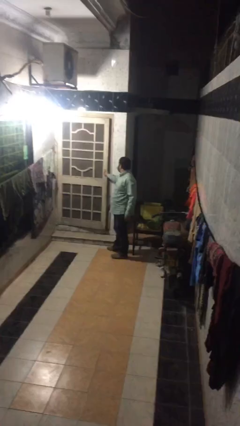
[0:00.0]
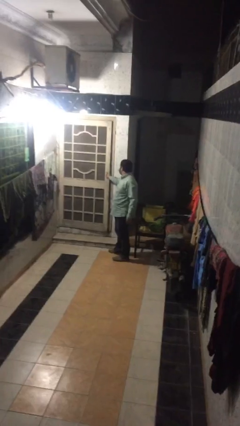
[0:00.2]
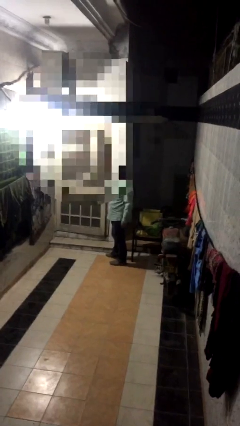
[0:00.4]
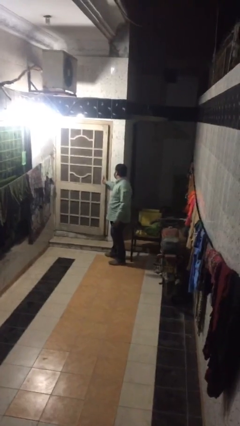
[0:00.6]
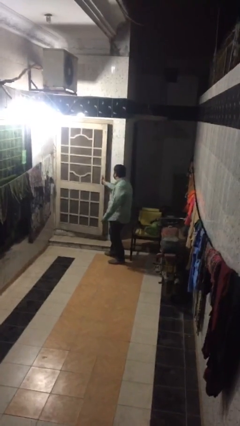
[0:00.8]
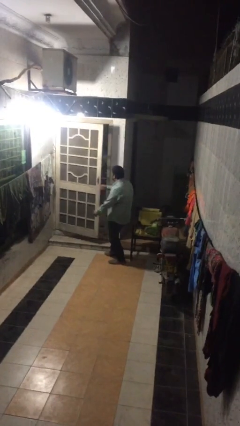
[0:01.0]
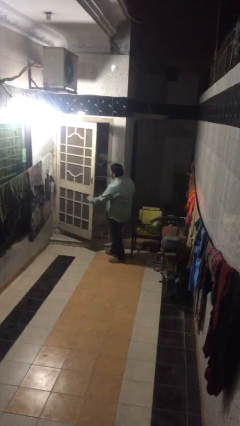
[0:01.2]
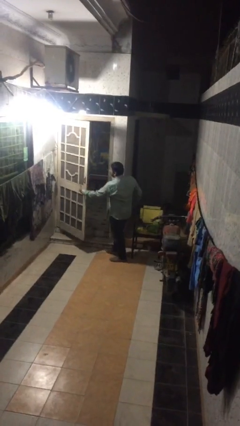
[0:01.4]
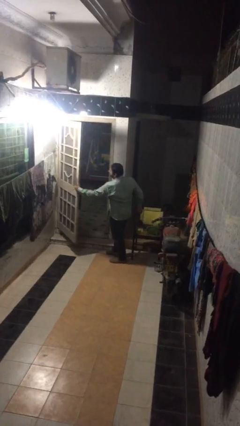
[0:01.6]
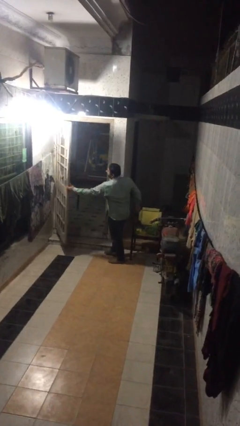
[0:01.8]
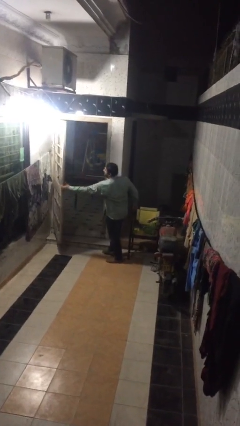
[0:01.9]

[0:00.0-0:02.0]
person opens facility door

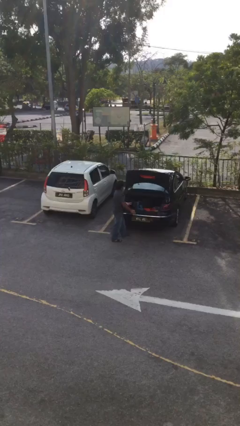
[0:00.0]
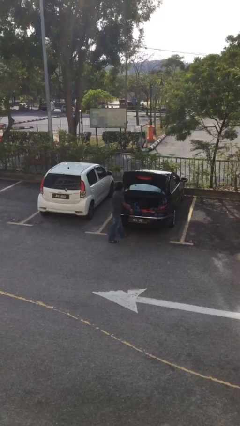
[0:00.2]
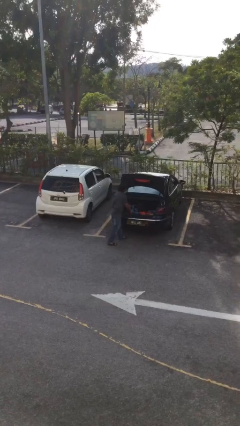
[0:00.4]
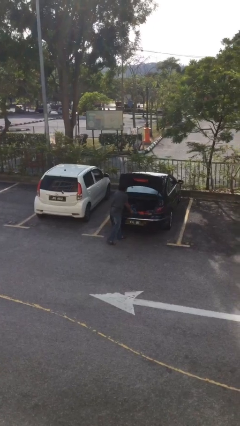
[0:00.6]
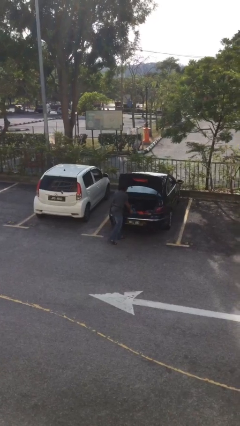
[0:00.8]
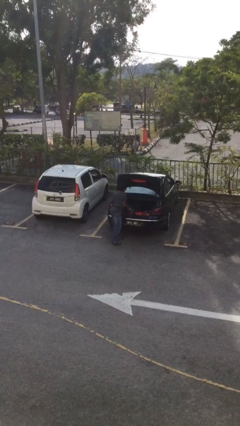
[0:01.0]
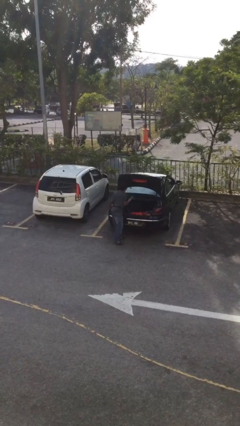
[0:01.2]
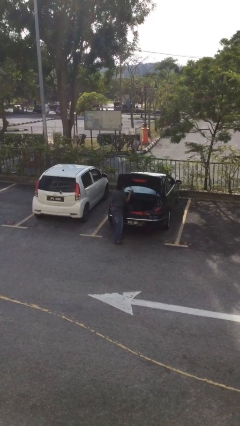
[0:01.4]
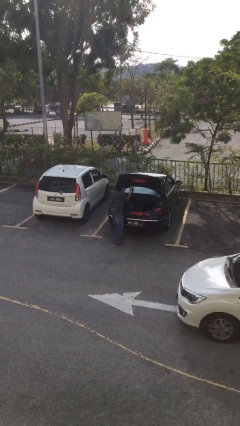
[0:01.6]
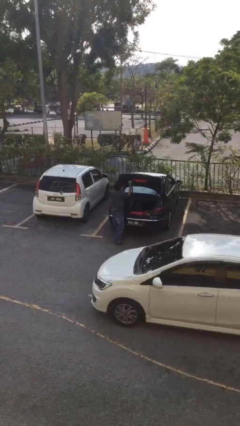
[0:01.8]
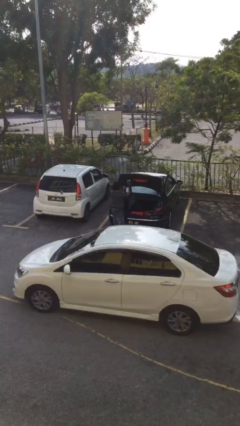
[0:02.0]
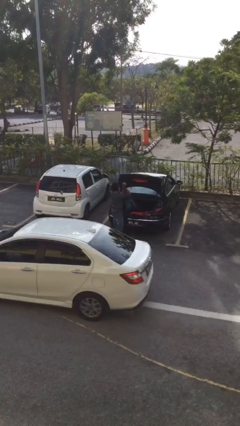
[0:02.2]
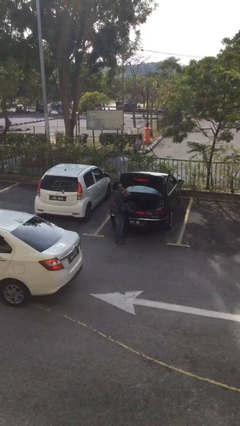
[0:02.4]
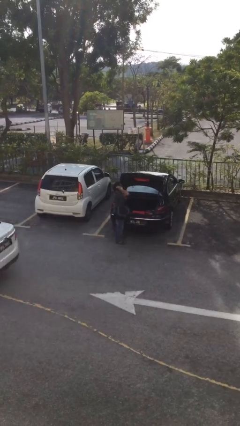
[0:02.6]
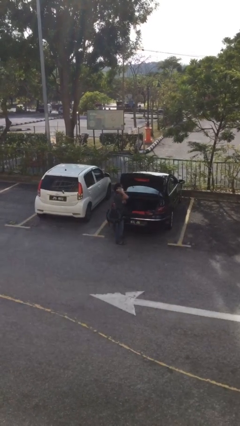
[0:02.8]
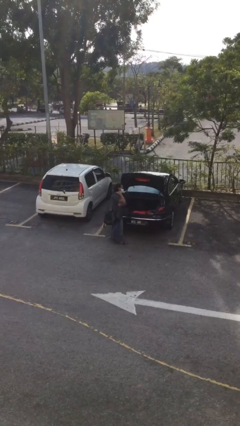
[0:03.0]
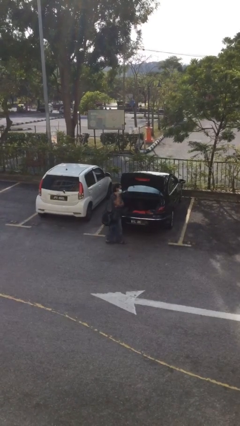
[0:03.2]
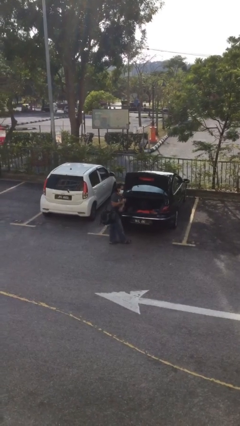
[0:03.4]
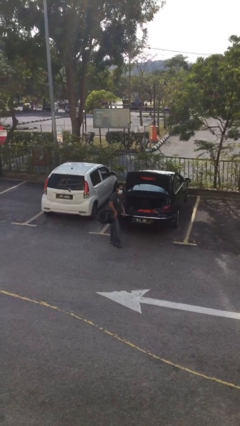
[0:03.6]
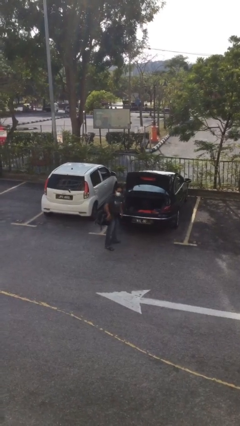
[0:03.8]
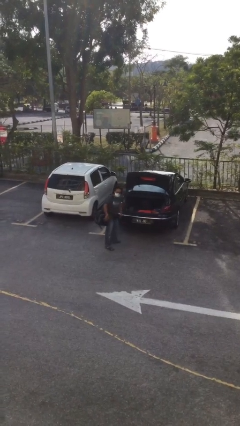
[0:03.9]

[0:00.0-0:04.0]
person unloads car

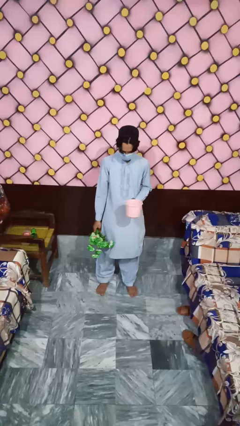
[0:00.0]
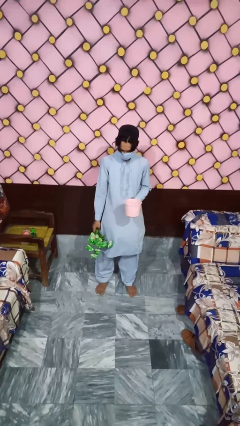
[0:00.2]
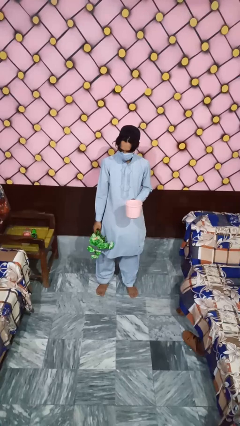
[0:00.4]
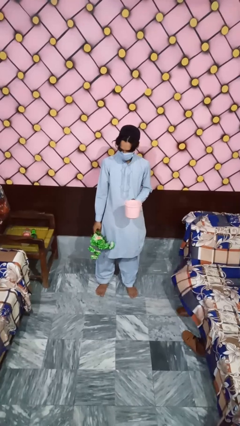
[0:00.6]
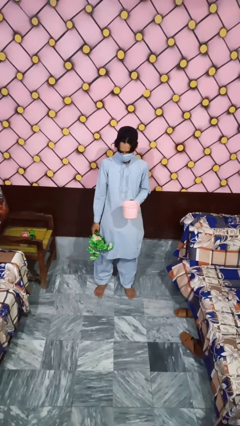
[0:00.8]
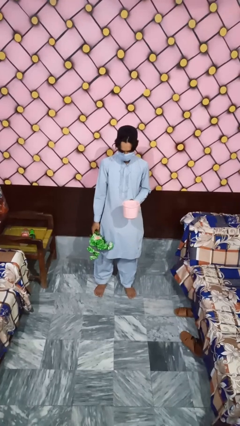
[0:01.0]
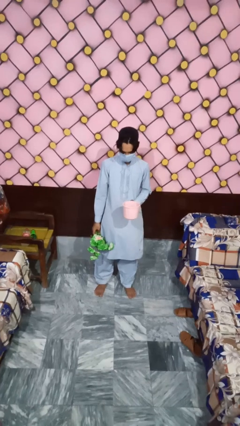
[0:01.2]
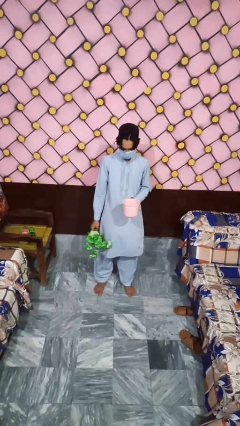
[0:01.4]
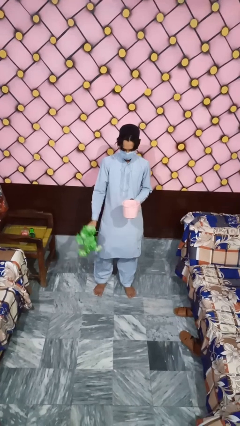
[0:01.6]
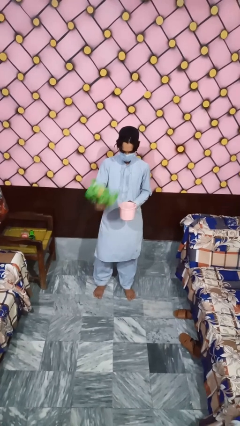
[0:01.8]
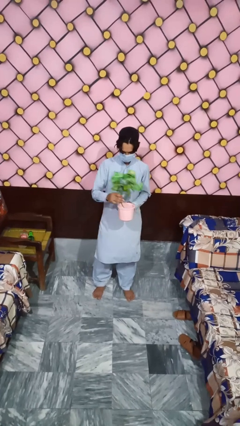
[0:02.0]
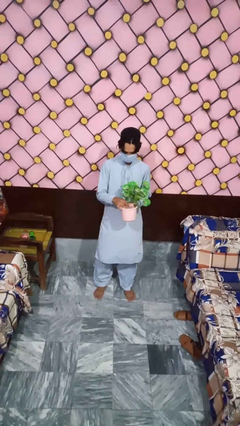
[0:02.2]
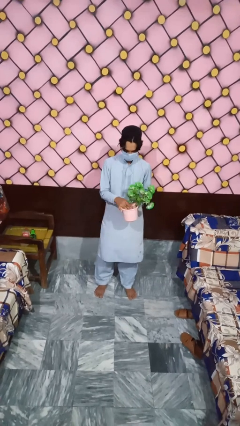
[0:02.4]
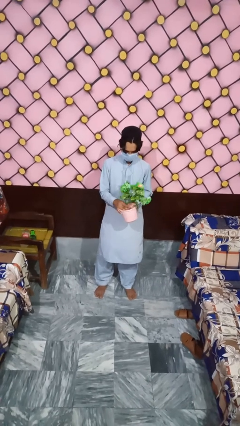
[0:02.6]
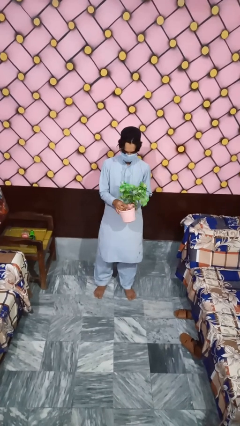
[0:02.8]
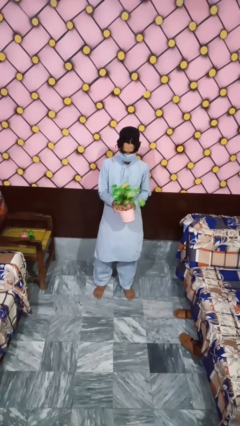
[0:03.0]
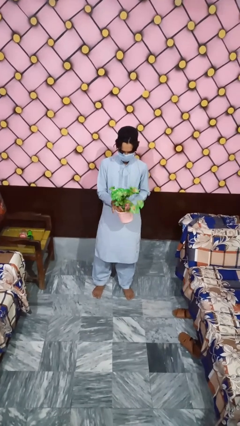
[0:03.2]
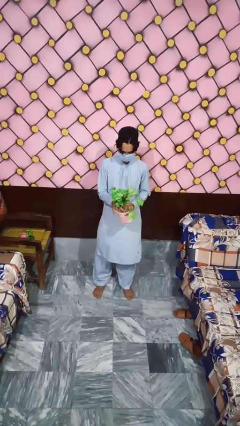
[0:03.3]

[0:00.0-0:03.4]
person arranges flowers in vase

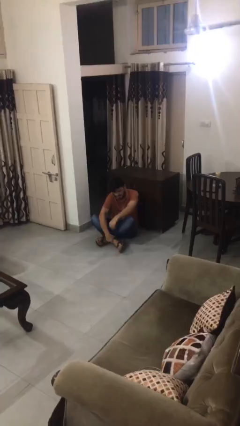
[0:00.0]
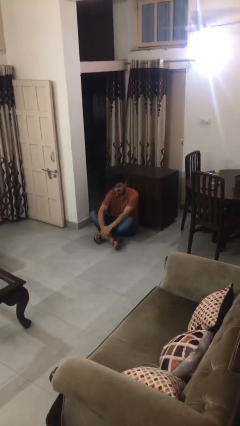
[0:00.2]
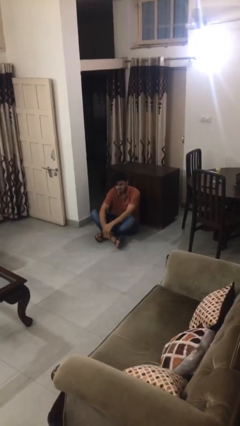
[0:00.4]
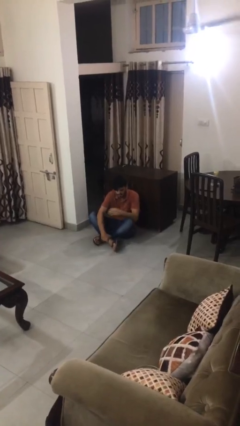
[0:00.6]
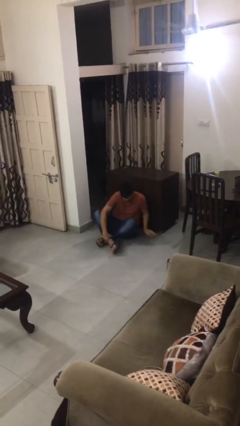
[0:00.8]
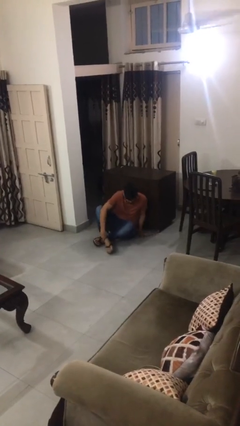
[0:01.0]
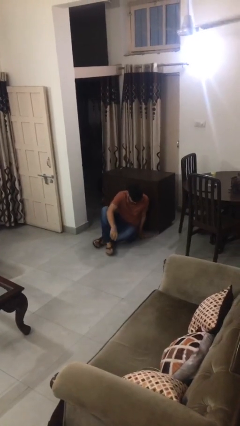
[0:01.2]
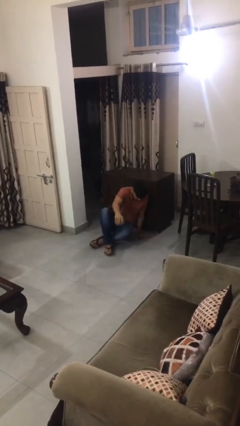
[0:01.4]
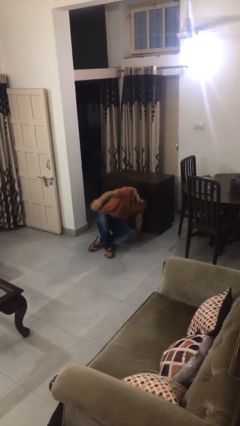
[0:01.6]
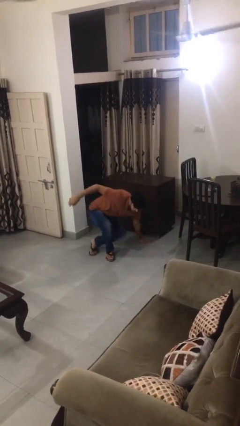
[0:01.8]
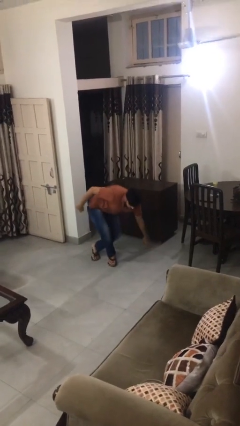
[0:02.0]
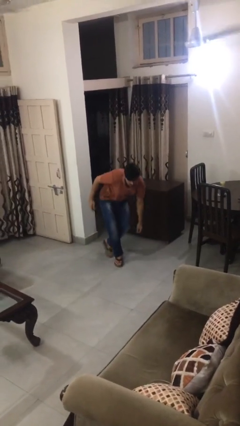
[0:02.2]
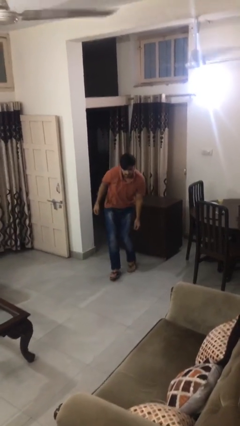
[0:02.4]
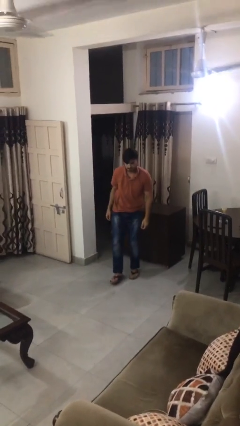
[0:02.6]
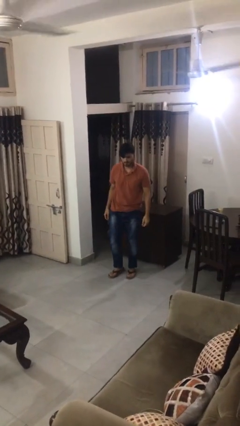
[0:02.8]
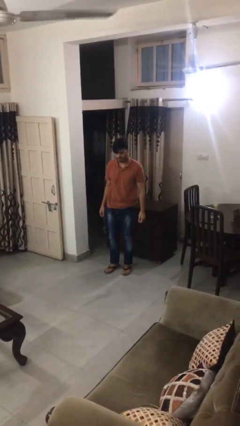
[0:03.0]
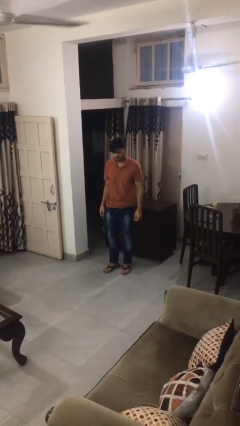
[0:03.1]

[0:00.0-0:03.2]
person stands up from floor

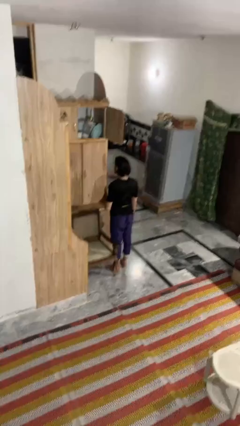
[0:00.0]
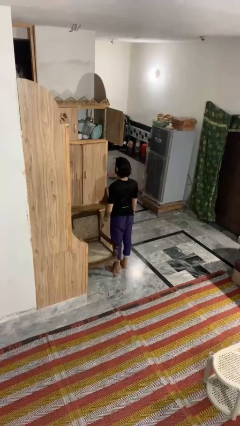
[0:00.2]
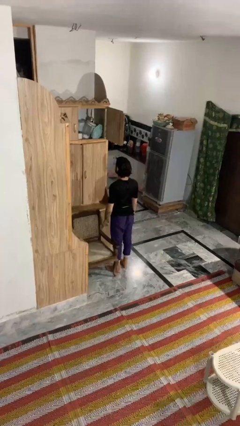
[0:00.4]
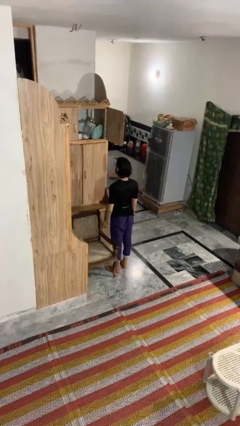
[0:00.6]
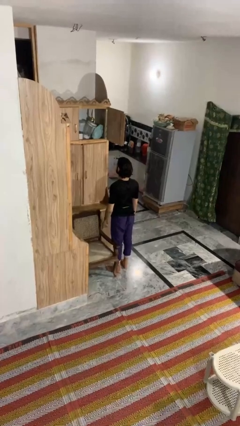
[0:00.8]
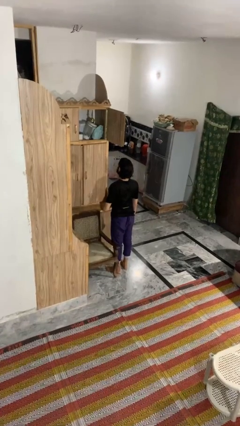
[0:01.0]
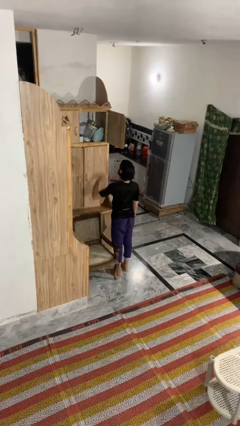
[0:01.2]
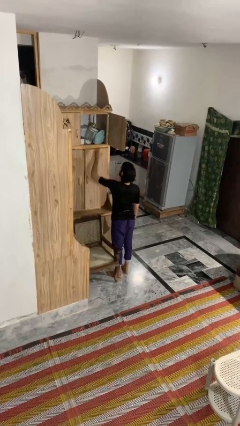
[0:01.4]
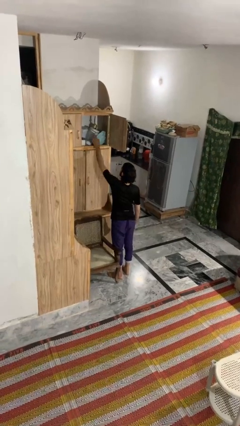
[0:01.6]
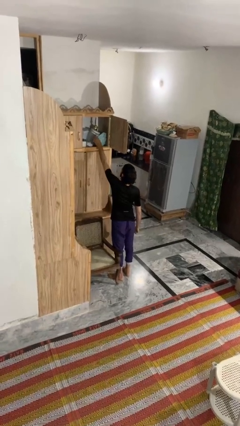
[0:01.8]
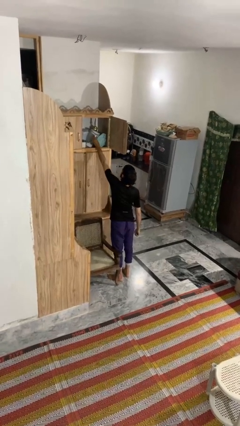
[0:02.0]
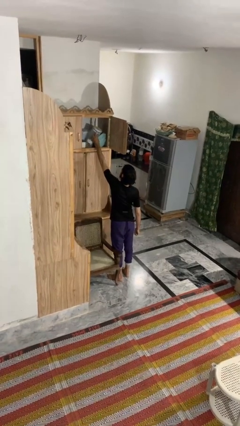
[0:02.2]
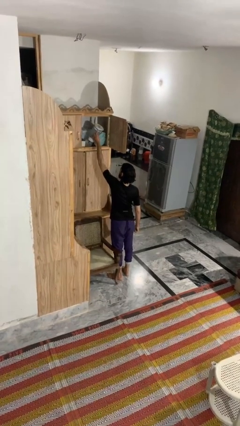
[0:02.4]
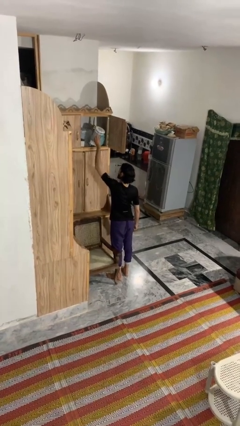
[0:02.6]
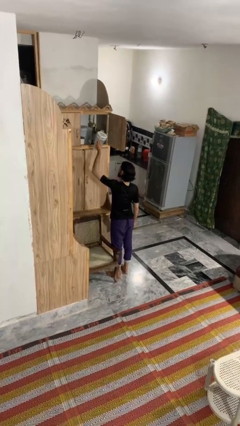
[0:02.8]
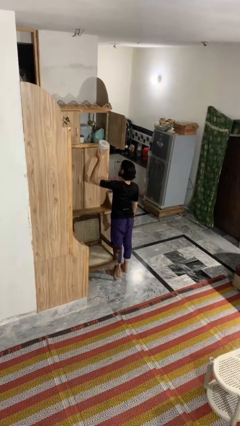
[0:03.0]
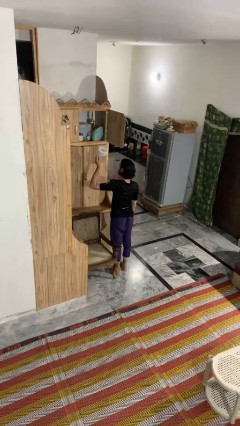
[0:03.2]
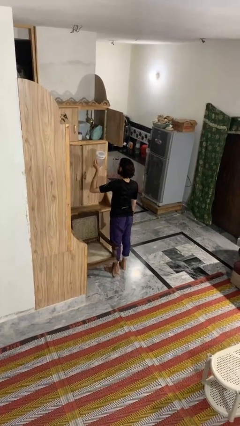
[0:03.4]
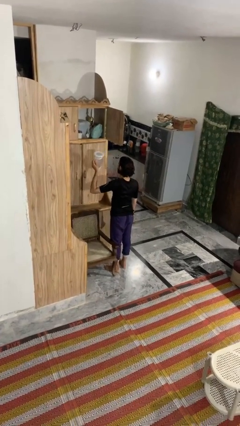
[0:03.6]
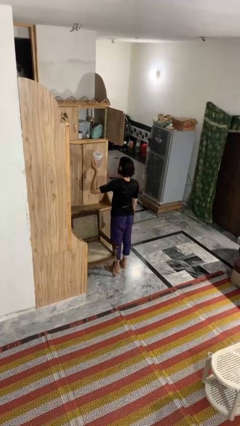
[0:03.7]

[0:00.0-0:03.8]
person picks up object from shelf

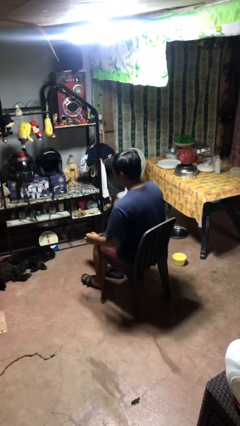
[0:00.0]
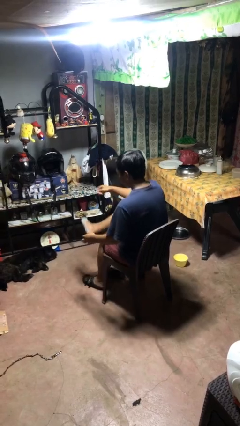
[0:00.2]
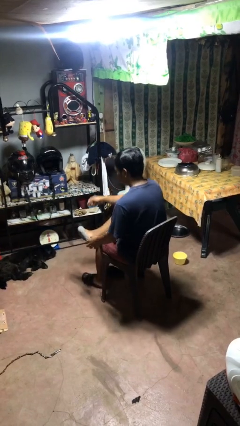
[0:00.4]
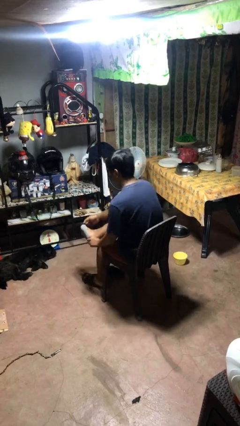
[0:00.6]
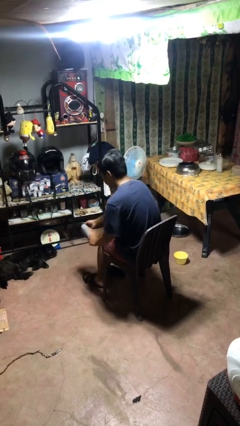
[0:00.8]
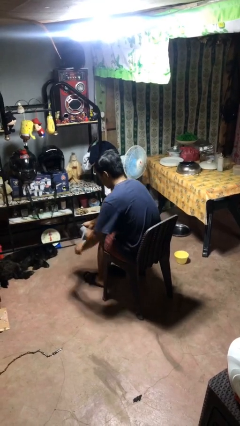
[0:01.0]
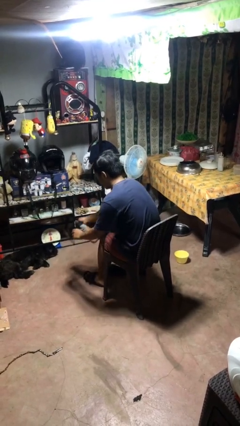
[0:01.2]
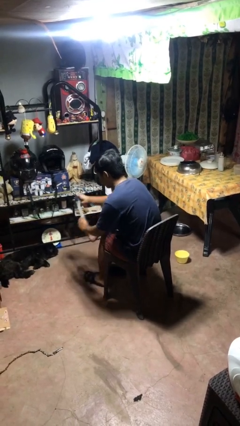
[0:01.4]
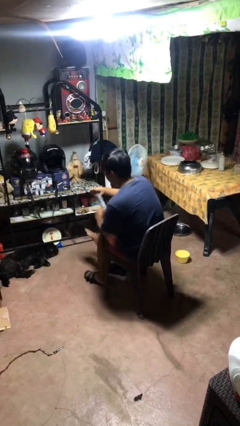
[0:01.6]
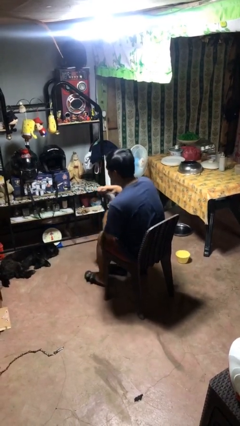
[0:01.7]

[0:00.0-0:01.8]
person takes off socks
